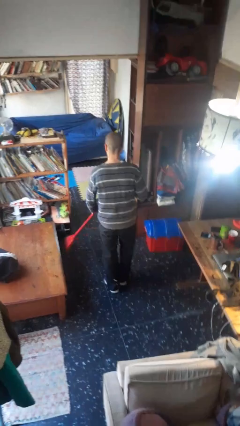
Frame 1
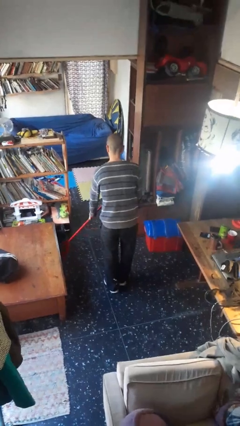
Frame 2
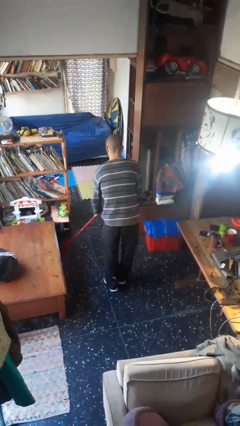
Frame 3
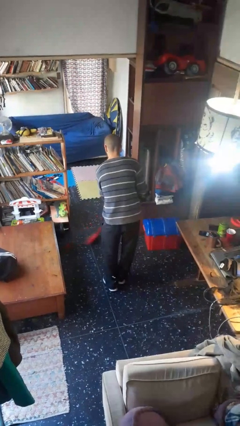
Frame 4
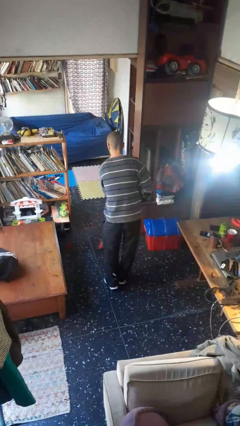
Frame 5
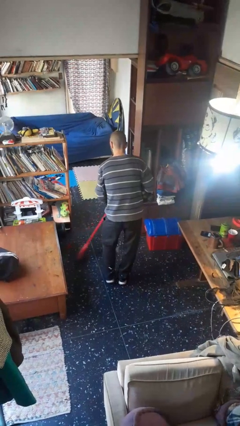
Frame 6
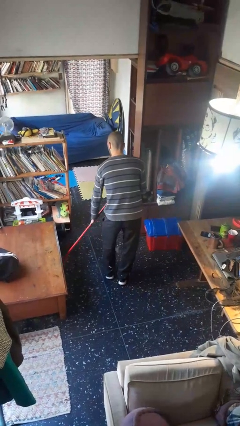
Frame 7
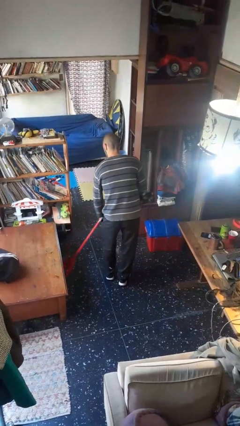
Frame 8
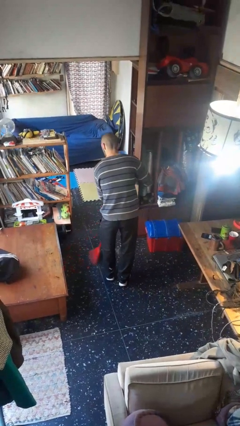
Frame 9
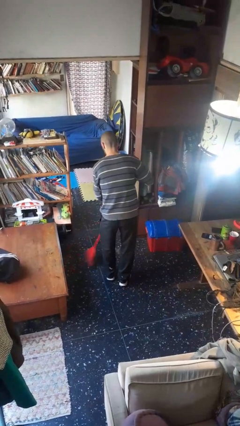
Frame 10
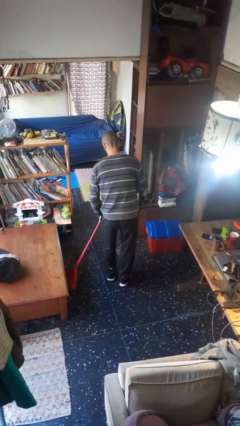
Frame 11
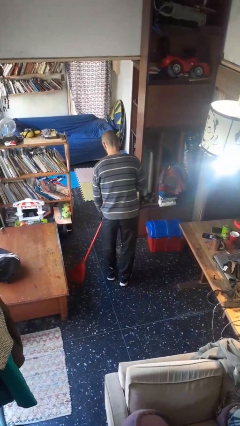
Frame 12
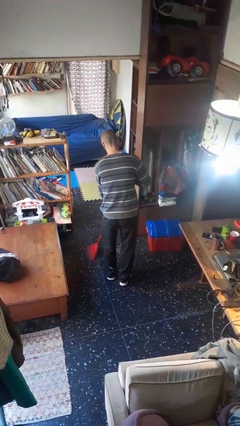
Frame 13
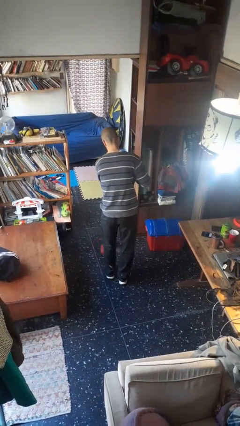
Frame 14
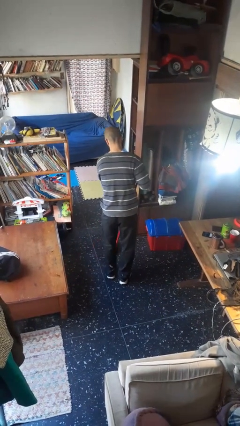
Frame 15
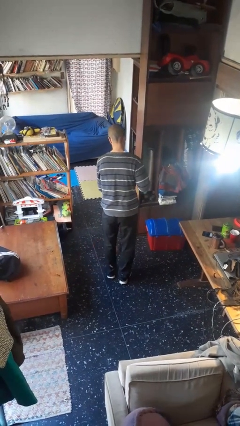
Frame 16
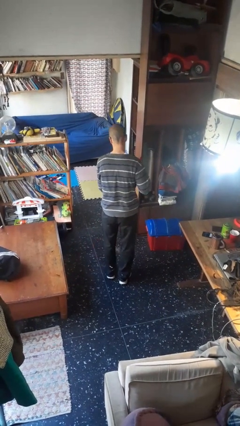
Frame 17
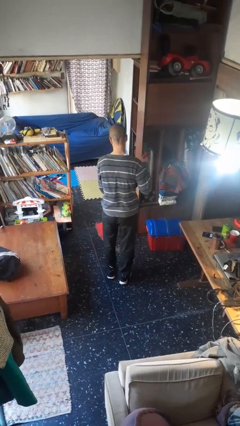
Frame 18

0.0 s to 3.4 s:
person sweeps floor

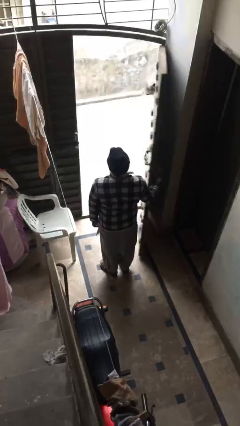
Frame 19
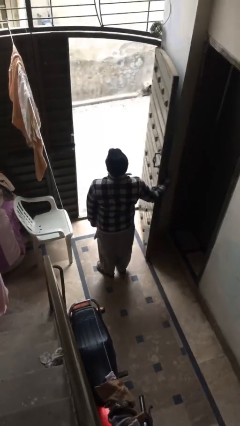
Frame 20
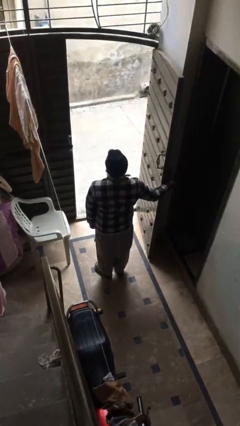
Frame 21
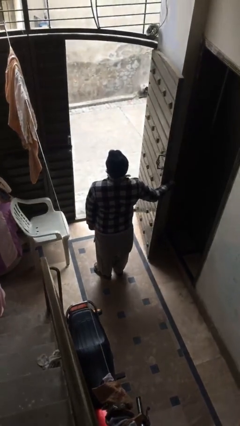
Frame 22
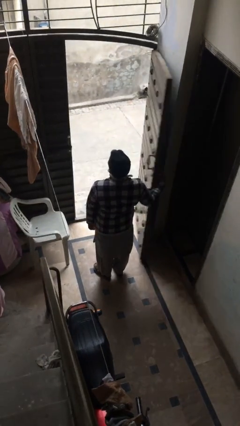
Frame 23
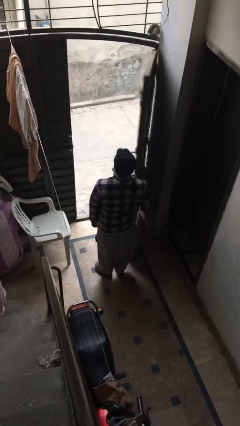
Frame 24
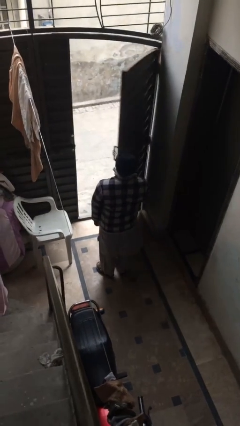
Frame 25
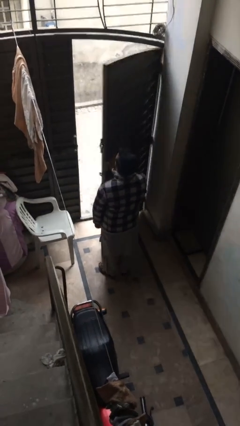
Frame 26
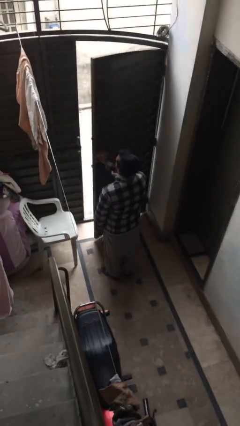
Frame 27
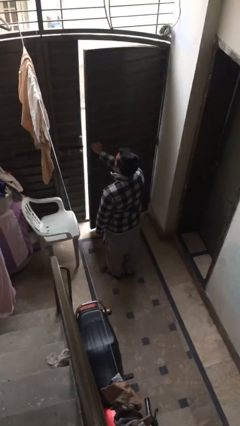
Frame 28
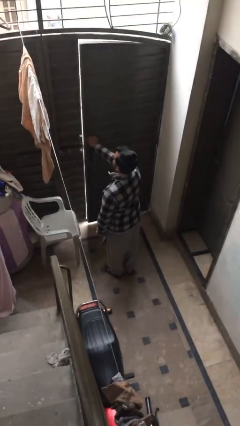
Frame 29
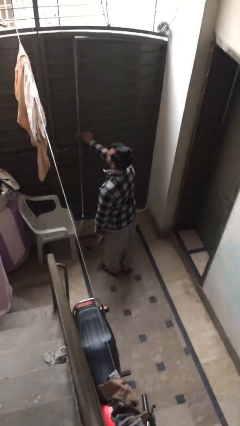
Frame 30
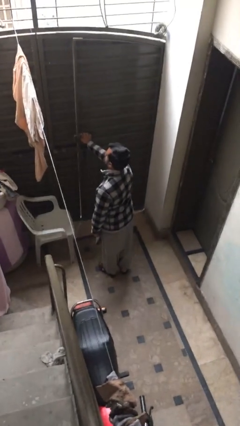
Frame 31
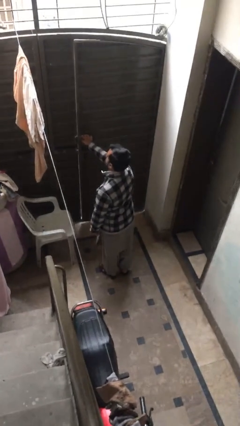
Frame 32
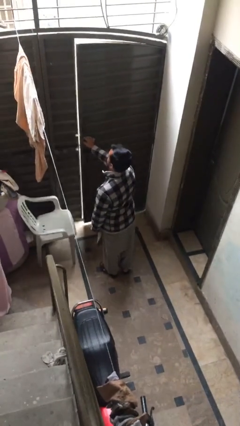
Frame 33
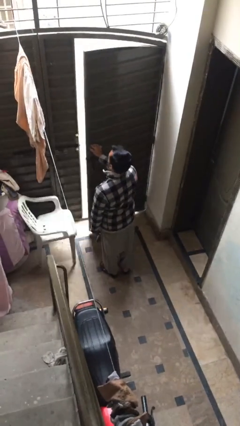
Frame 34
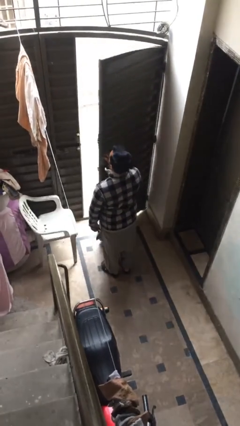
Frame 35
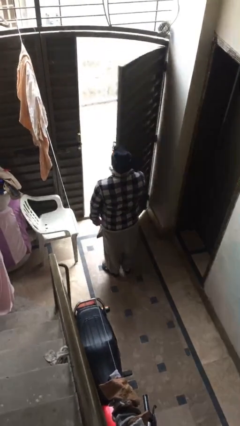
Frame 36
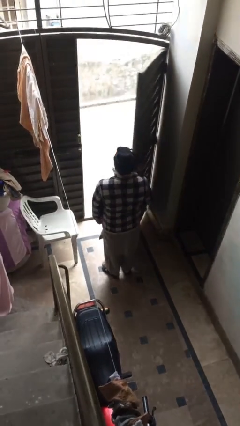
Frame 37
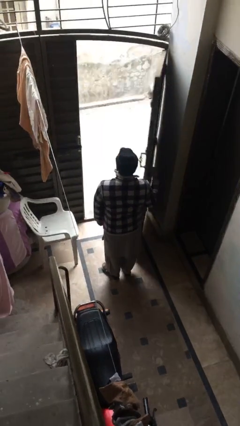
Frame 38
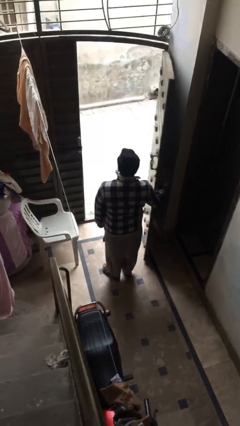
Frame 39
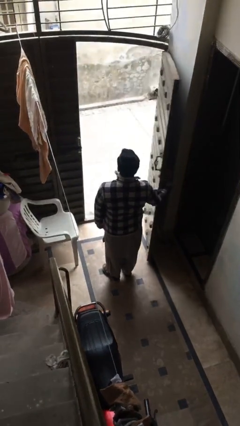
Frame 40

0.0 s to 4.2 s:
person closes facility door

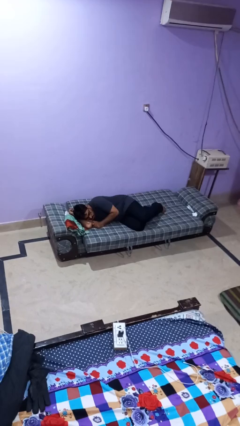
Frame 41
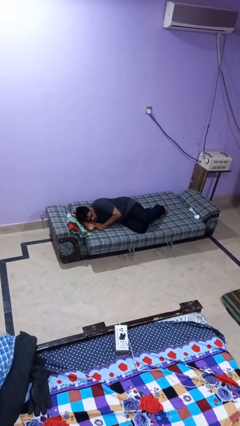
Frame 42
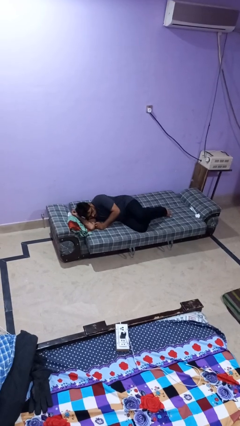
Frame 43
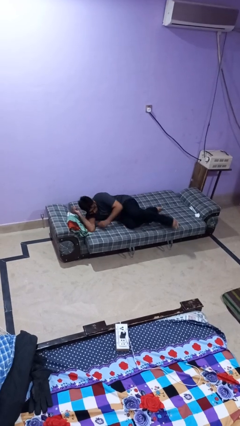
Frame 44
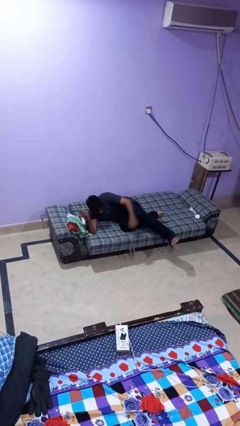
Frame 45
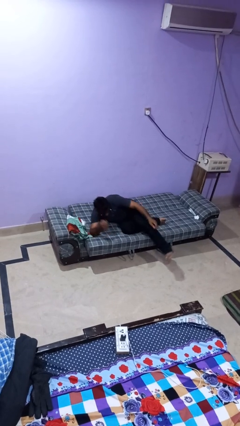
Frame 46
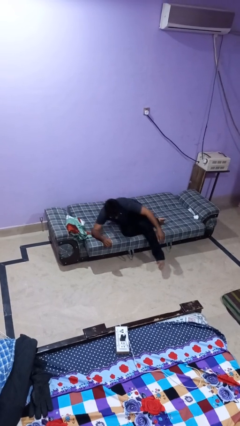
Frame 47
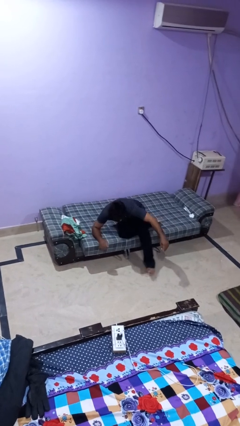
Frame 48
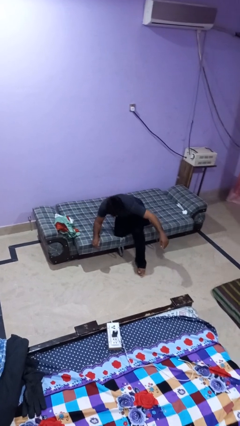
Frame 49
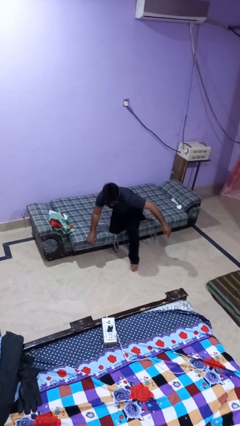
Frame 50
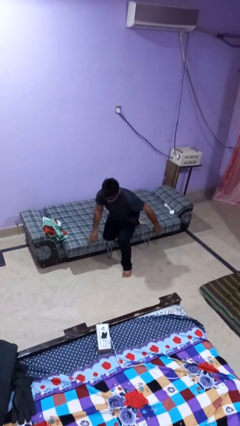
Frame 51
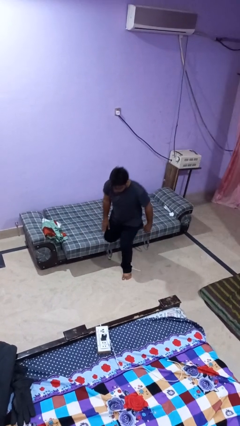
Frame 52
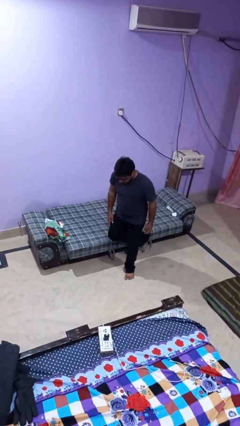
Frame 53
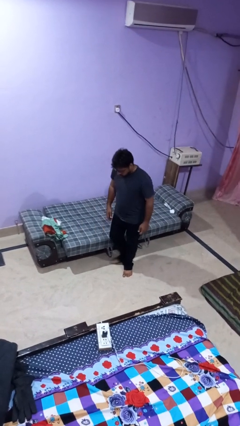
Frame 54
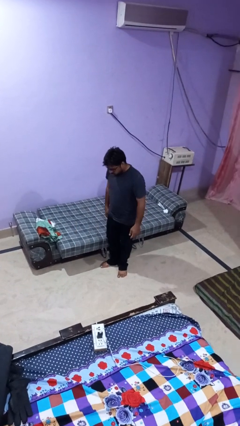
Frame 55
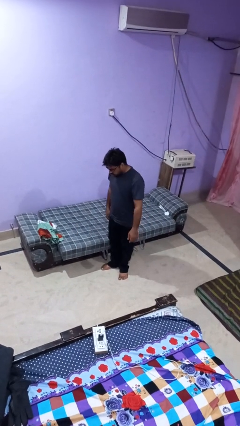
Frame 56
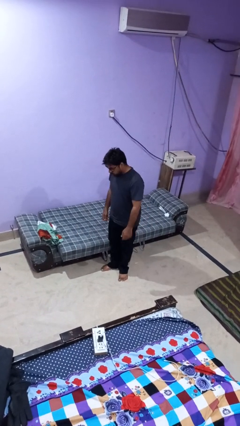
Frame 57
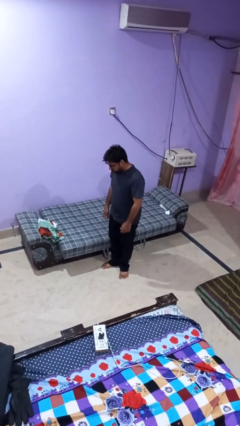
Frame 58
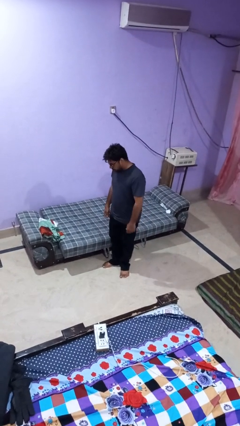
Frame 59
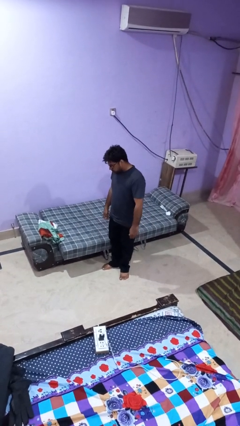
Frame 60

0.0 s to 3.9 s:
person stands up

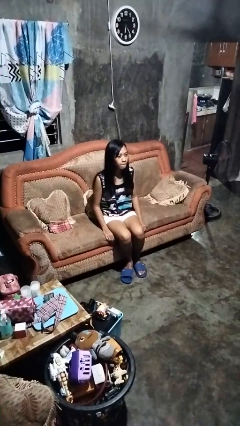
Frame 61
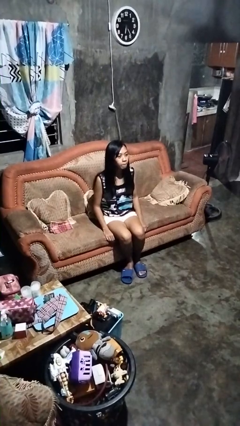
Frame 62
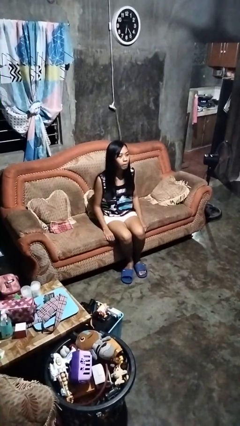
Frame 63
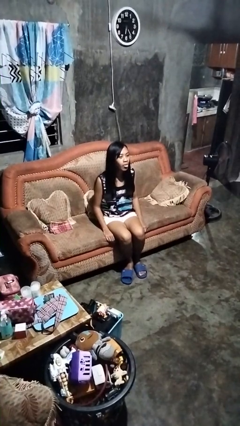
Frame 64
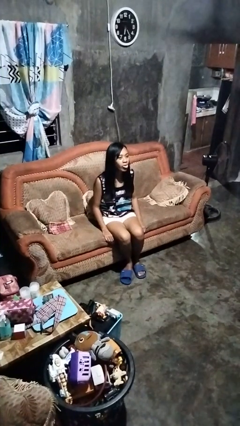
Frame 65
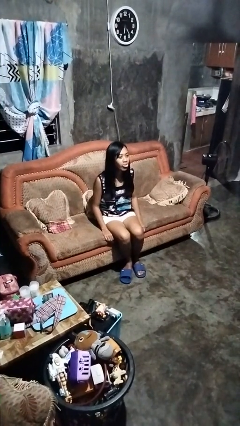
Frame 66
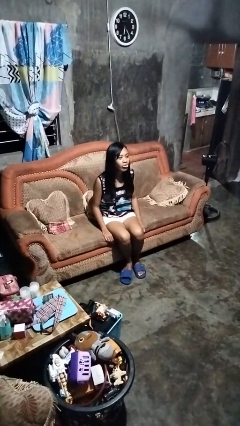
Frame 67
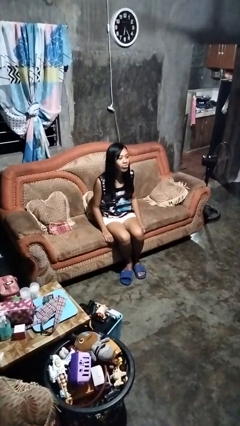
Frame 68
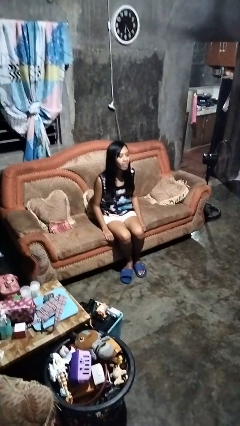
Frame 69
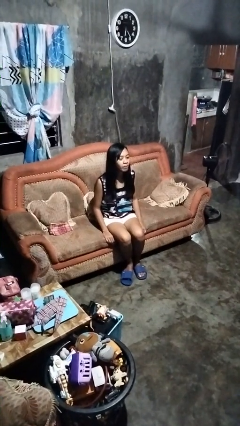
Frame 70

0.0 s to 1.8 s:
person sticks out tongue

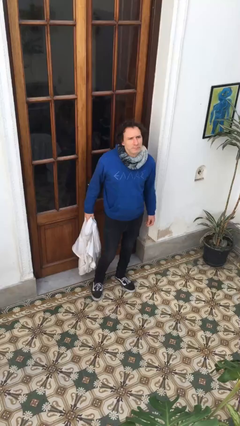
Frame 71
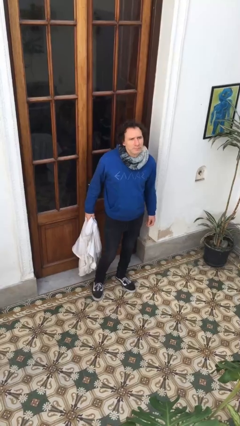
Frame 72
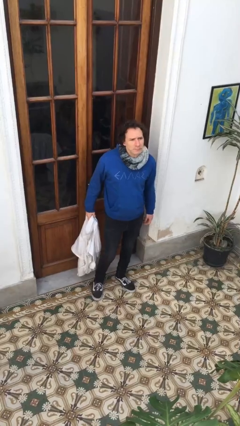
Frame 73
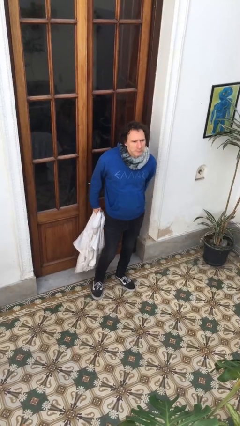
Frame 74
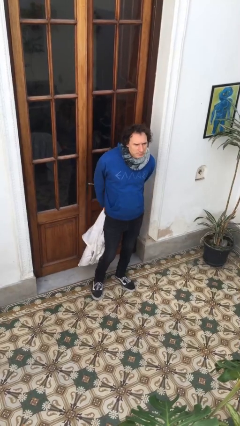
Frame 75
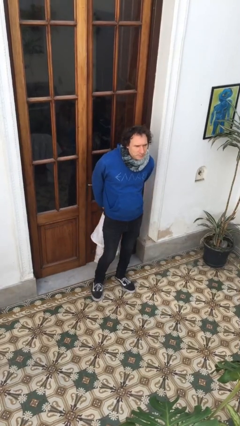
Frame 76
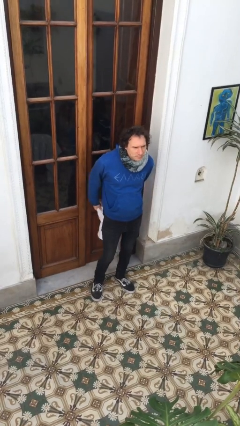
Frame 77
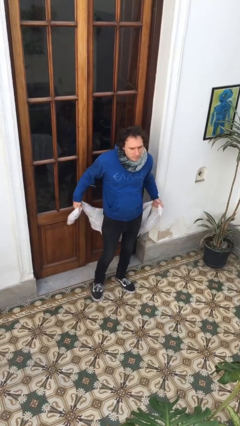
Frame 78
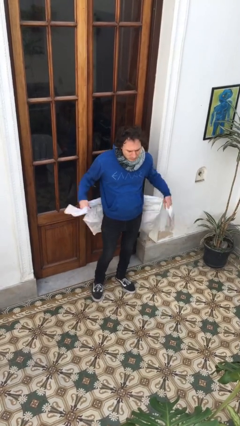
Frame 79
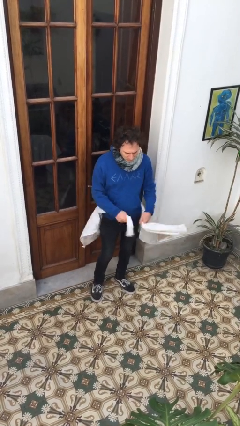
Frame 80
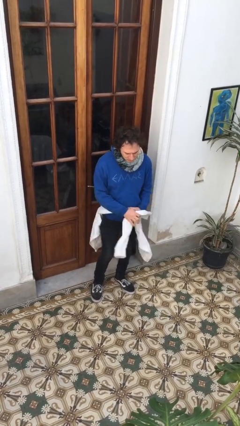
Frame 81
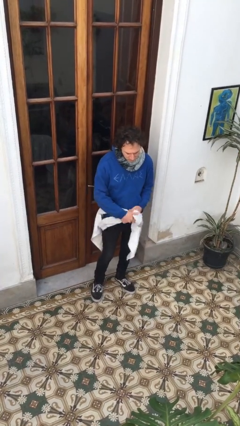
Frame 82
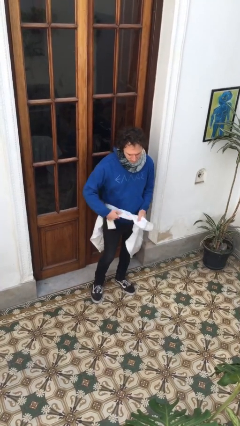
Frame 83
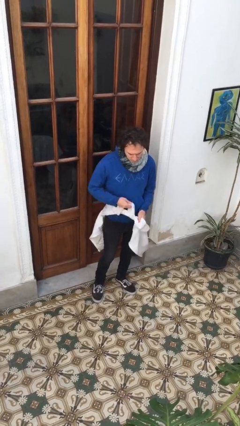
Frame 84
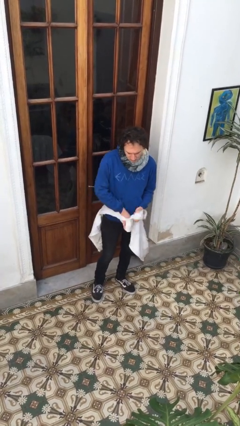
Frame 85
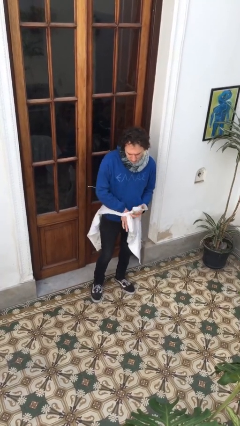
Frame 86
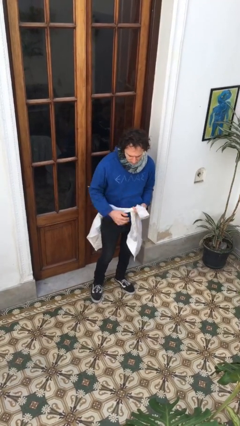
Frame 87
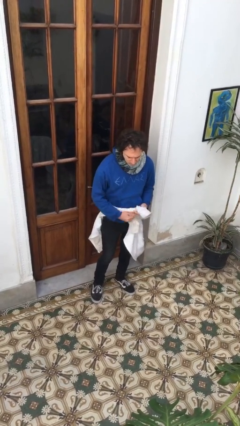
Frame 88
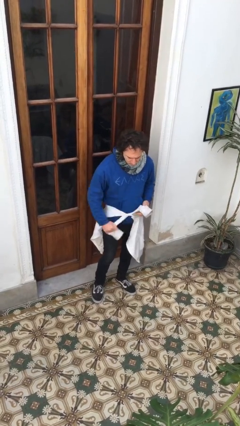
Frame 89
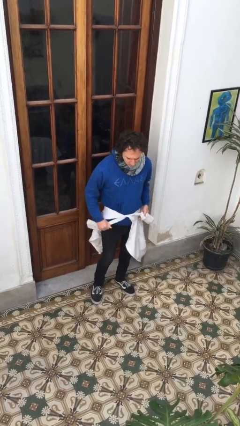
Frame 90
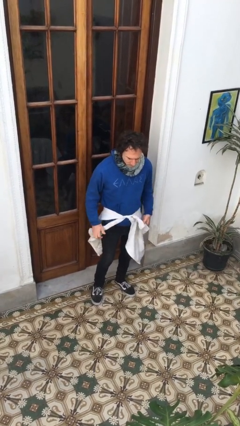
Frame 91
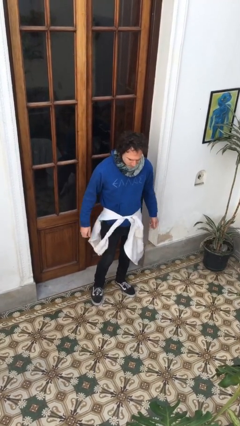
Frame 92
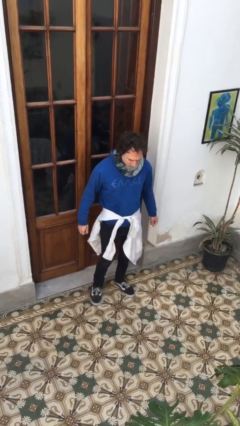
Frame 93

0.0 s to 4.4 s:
person ties jacket around waist
